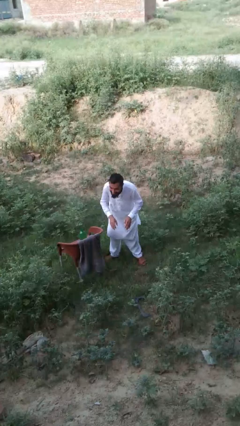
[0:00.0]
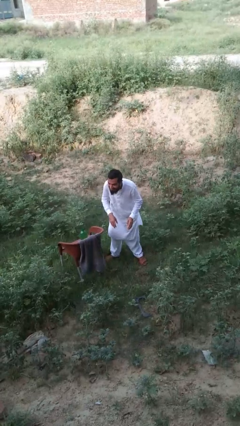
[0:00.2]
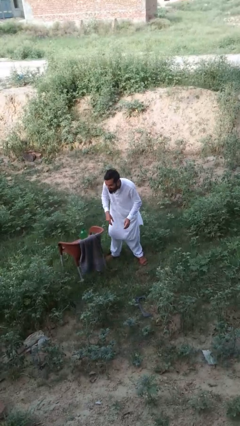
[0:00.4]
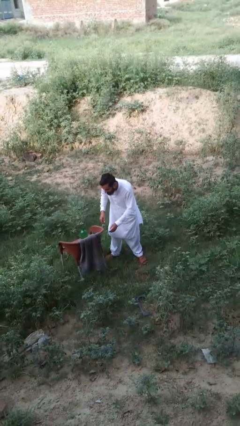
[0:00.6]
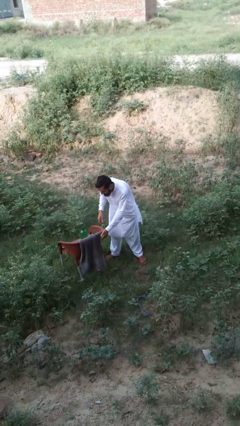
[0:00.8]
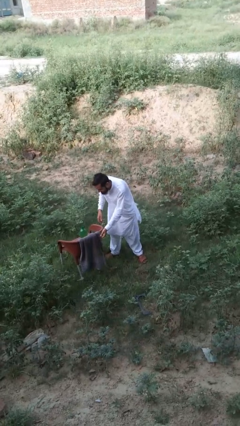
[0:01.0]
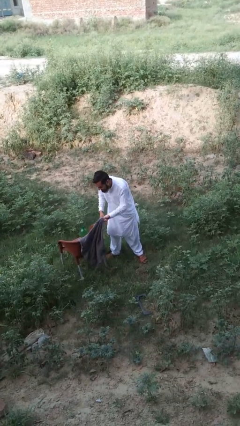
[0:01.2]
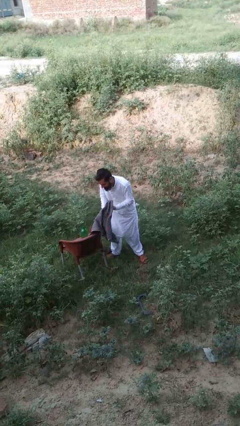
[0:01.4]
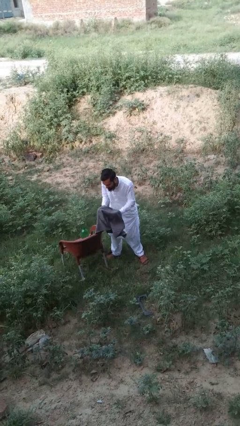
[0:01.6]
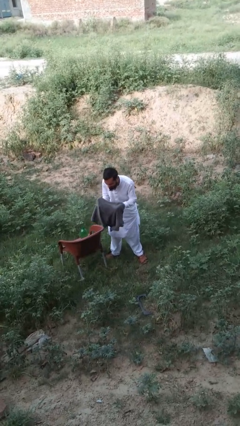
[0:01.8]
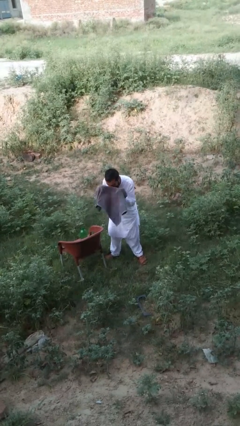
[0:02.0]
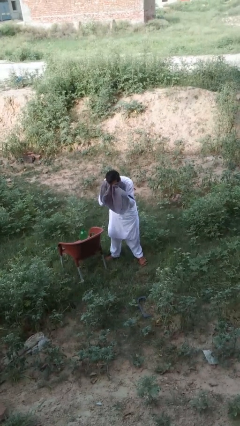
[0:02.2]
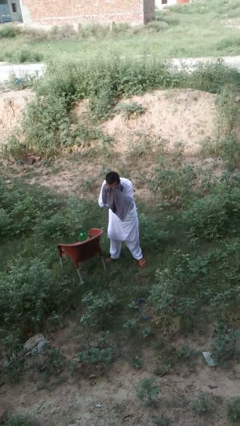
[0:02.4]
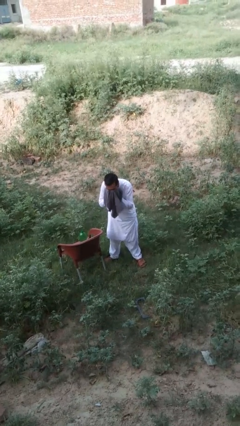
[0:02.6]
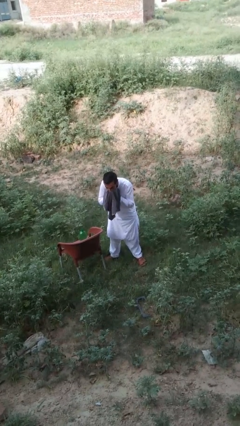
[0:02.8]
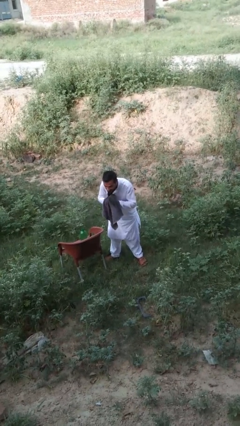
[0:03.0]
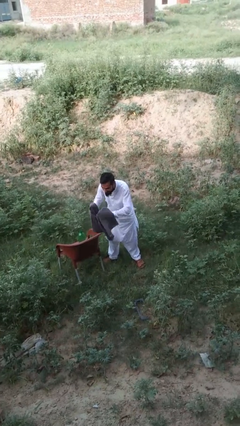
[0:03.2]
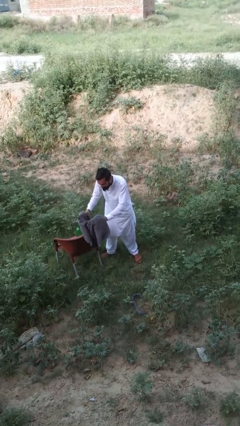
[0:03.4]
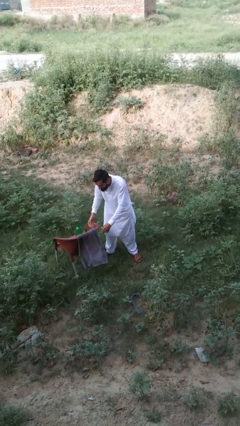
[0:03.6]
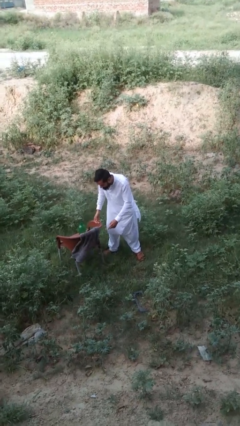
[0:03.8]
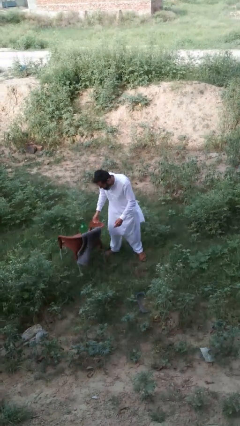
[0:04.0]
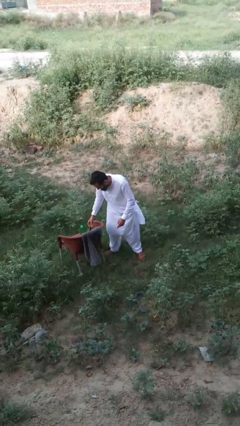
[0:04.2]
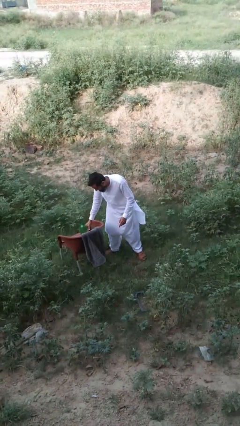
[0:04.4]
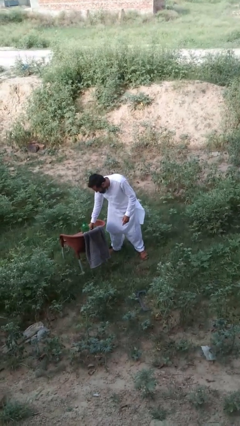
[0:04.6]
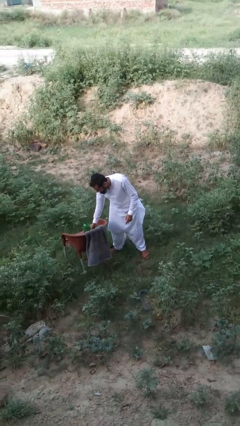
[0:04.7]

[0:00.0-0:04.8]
person dries face with towel

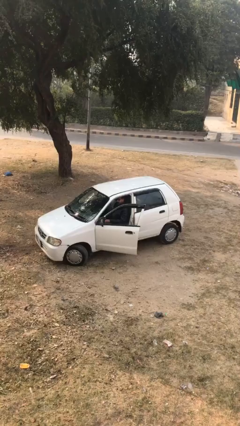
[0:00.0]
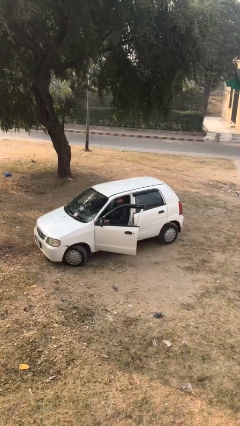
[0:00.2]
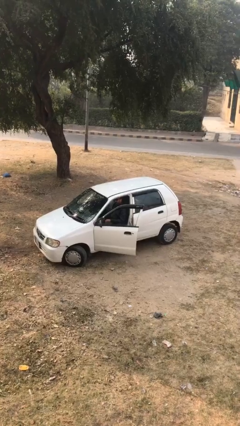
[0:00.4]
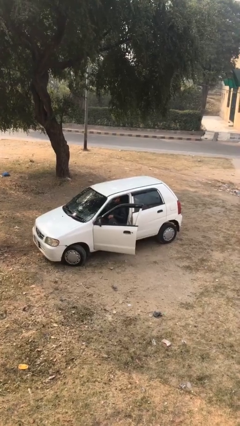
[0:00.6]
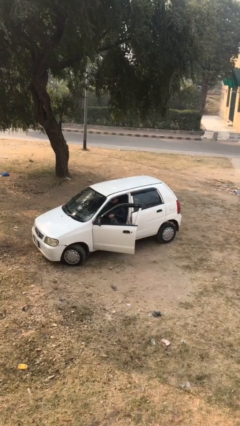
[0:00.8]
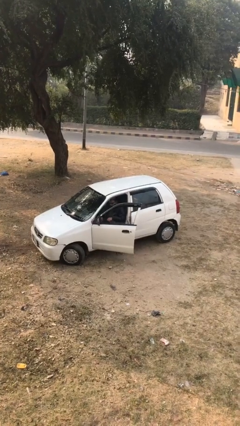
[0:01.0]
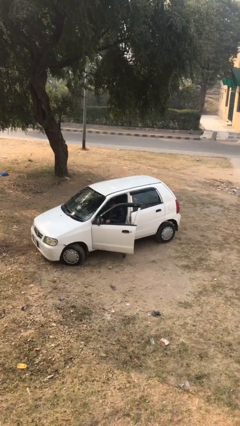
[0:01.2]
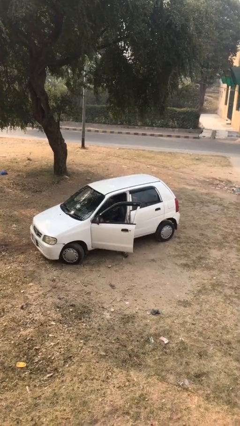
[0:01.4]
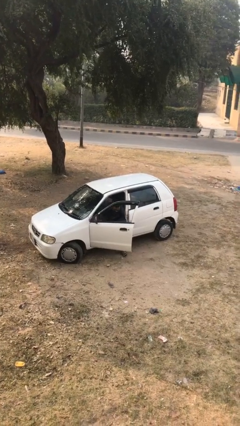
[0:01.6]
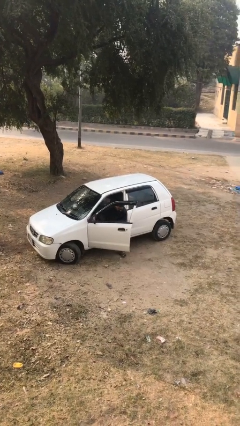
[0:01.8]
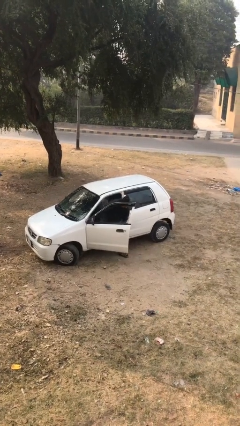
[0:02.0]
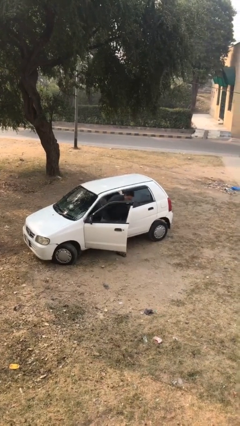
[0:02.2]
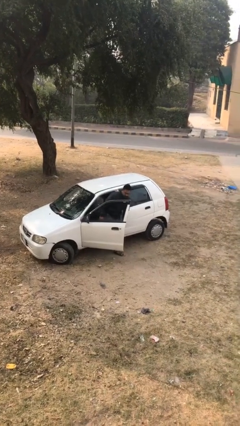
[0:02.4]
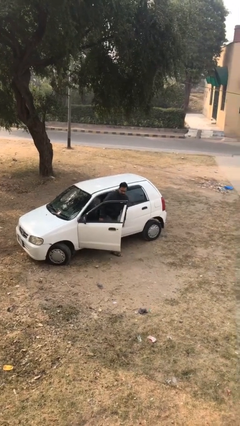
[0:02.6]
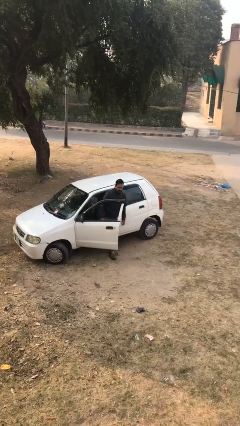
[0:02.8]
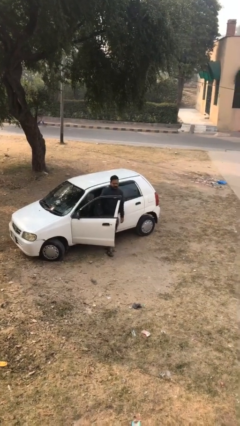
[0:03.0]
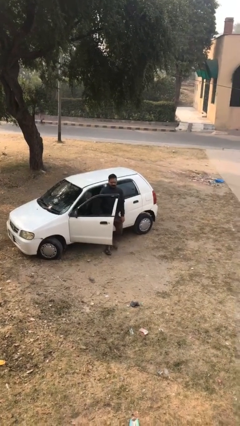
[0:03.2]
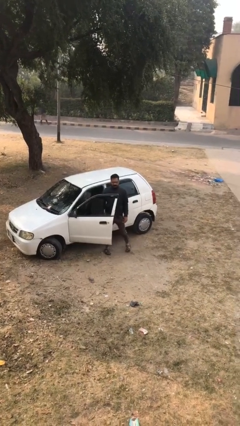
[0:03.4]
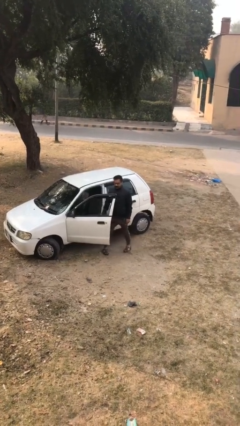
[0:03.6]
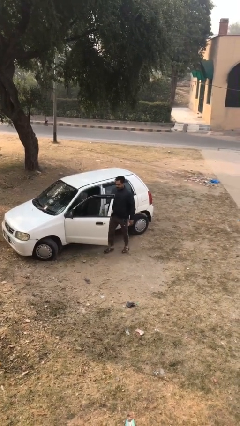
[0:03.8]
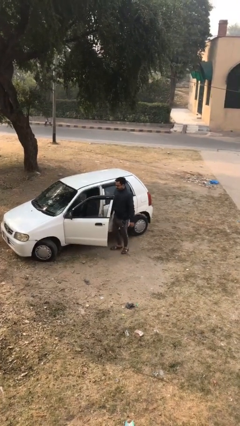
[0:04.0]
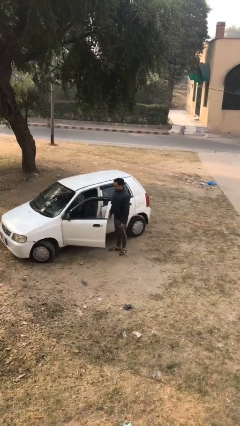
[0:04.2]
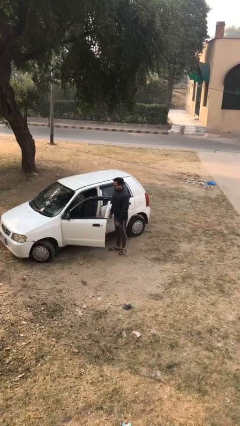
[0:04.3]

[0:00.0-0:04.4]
person exits car

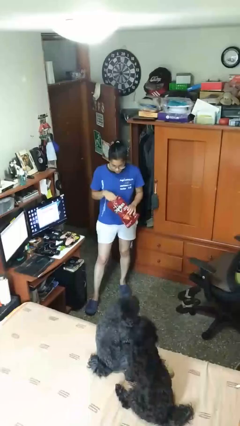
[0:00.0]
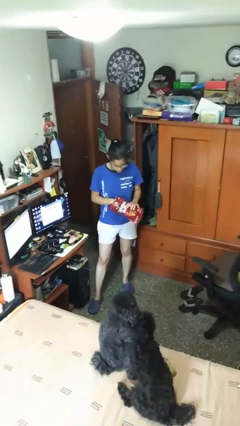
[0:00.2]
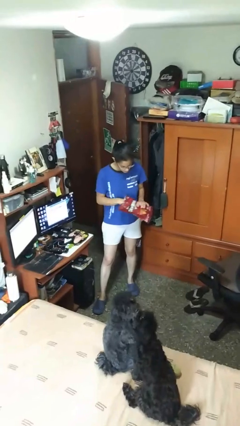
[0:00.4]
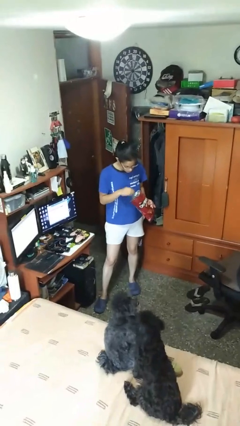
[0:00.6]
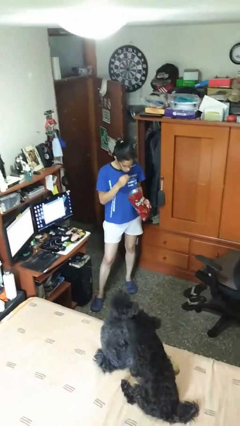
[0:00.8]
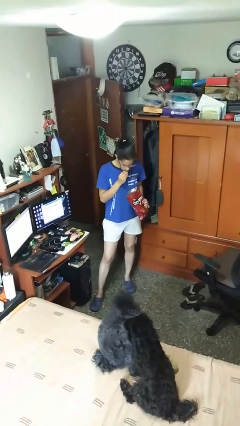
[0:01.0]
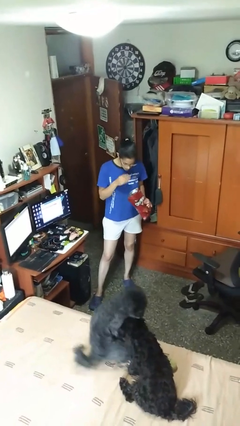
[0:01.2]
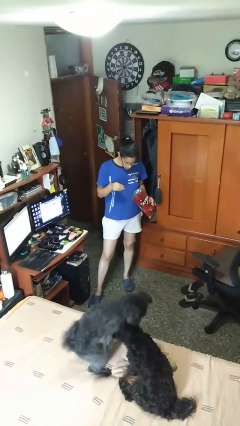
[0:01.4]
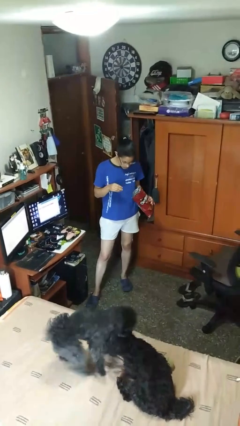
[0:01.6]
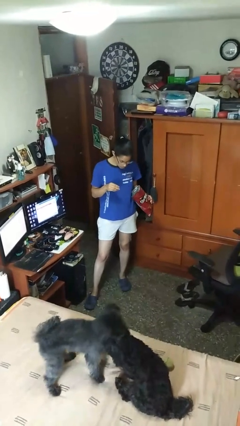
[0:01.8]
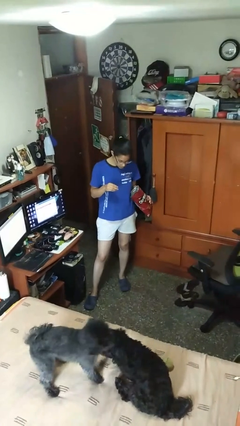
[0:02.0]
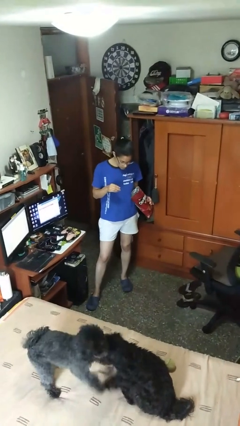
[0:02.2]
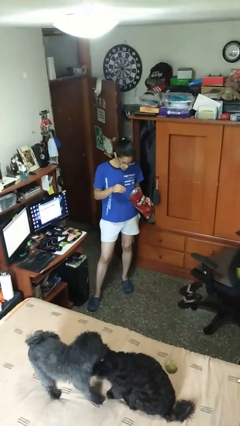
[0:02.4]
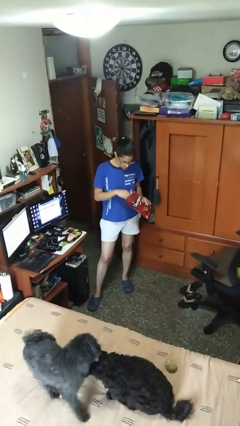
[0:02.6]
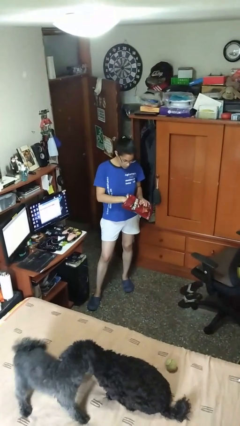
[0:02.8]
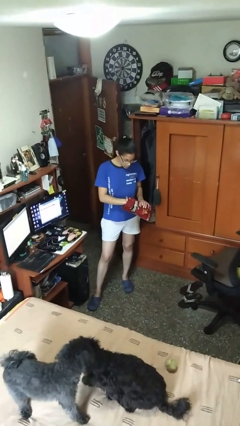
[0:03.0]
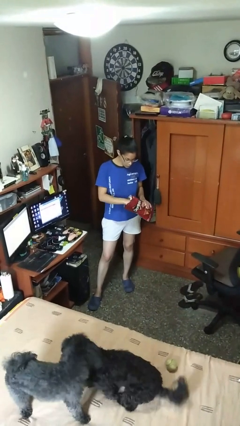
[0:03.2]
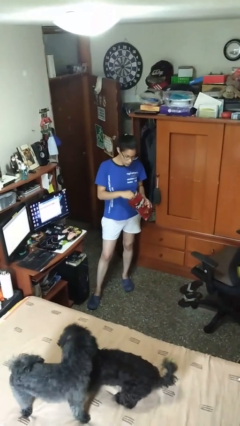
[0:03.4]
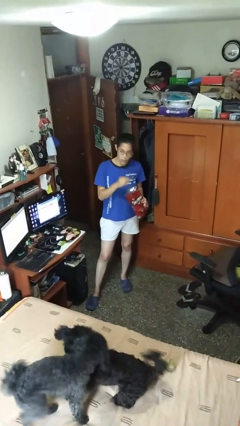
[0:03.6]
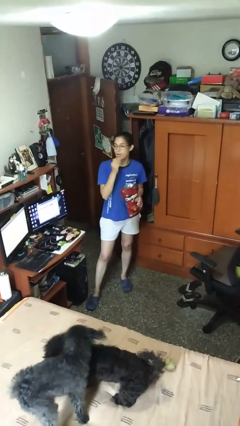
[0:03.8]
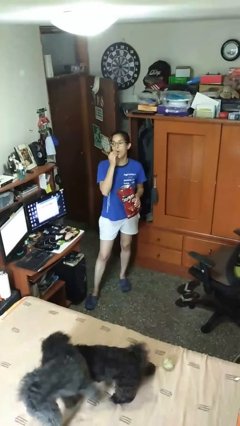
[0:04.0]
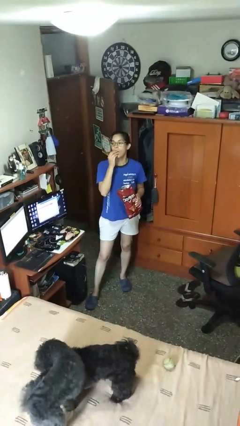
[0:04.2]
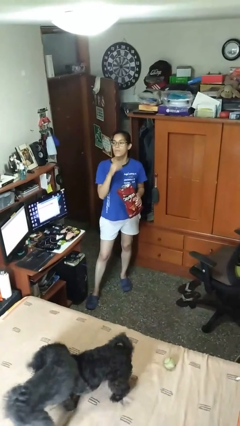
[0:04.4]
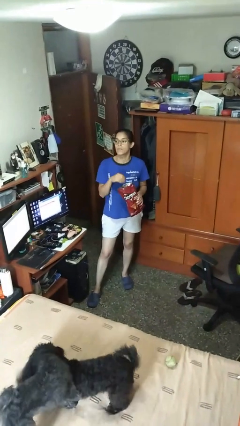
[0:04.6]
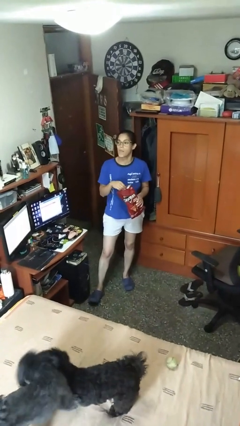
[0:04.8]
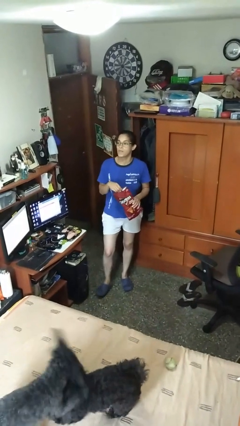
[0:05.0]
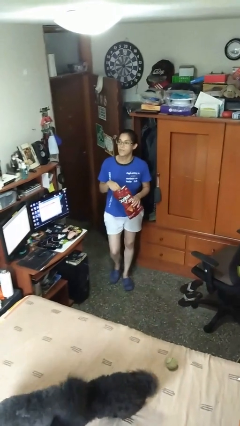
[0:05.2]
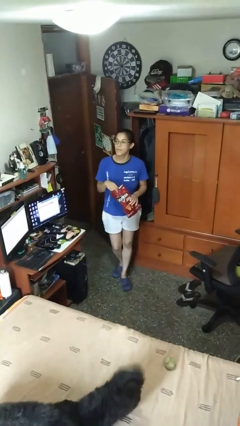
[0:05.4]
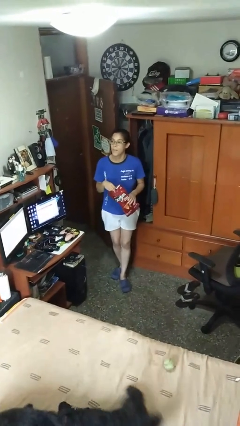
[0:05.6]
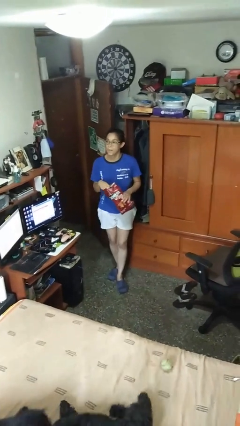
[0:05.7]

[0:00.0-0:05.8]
person eats snack from bag

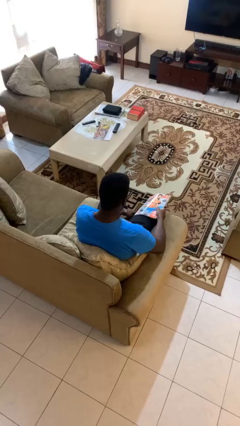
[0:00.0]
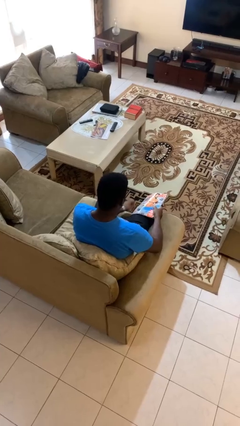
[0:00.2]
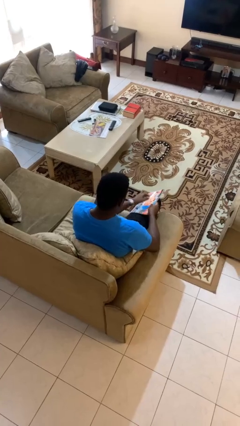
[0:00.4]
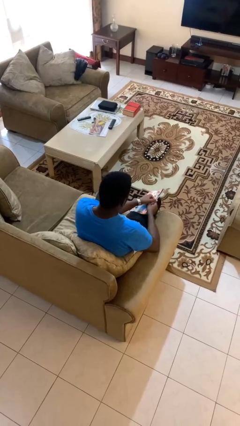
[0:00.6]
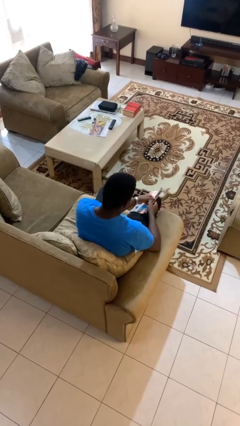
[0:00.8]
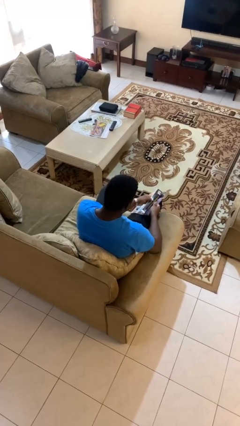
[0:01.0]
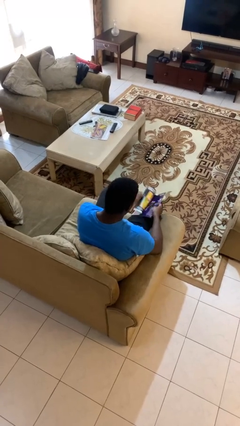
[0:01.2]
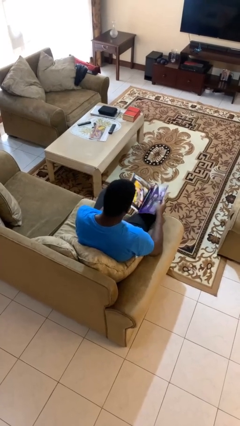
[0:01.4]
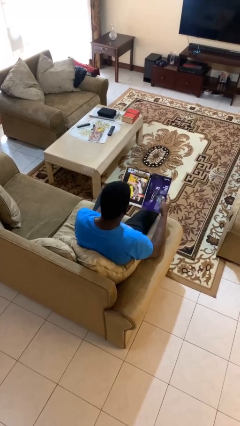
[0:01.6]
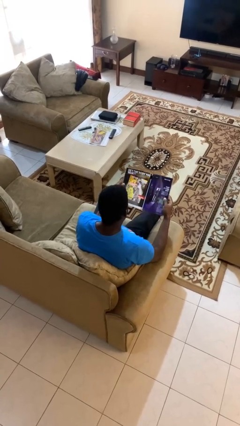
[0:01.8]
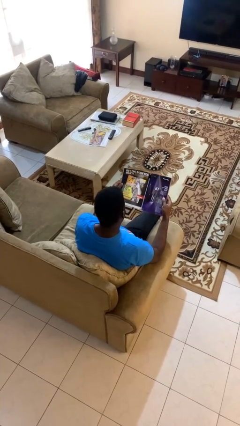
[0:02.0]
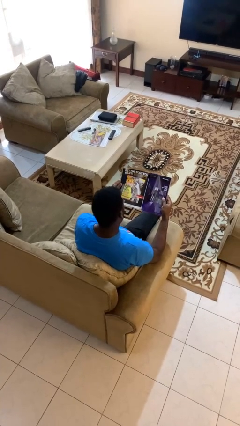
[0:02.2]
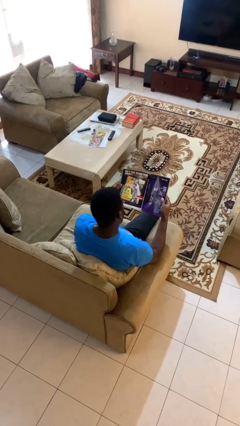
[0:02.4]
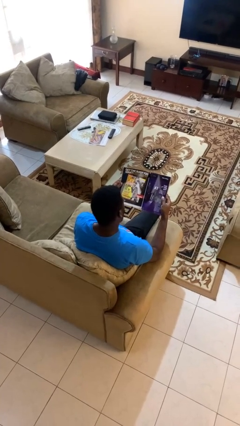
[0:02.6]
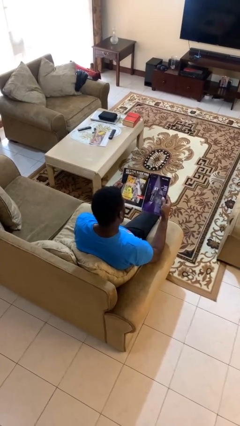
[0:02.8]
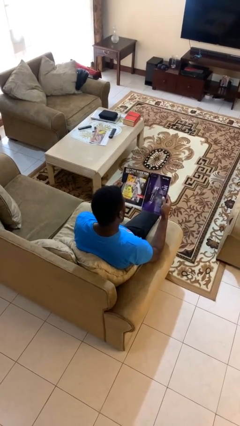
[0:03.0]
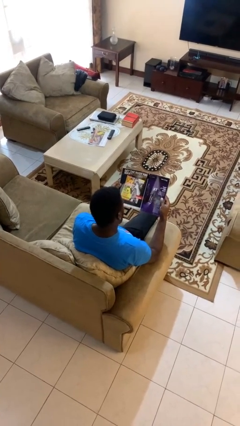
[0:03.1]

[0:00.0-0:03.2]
person reads magazine
